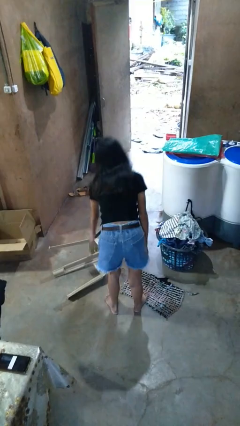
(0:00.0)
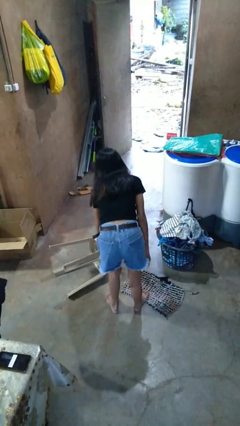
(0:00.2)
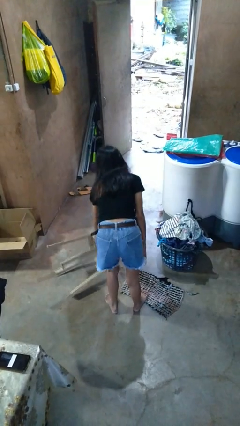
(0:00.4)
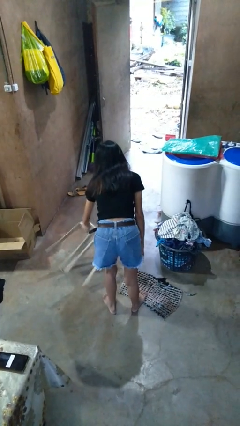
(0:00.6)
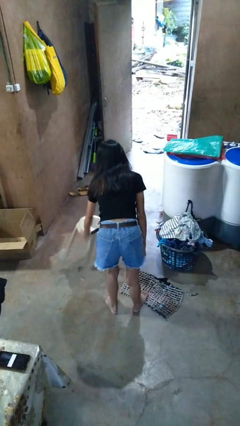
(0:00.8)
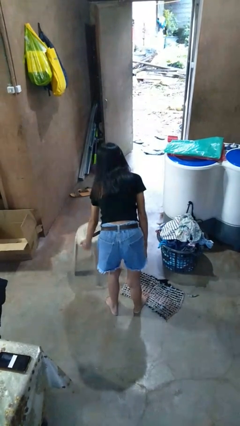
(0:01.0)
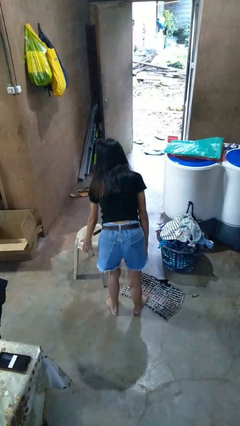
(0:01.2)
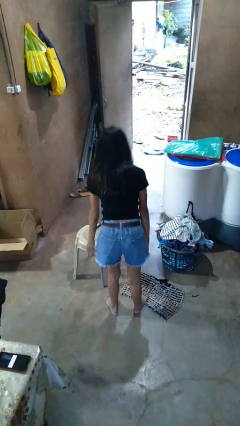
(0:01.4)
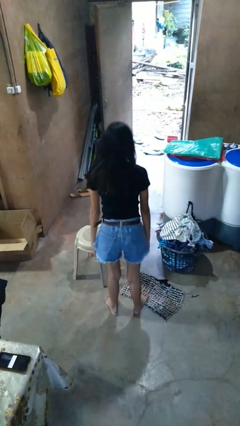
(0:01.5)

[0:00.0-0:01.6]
person sets upright furniture

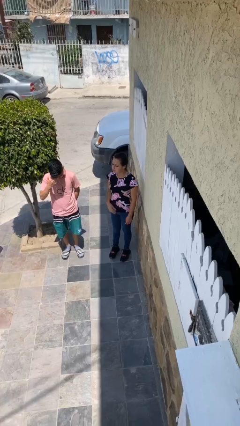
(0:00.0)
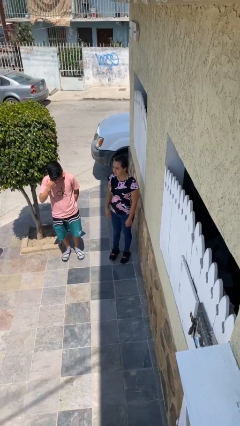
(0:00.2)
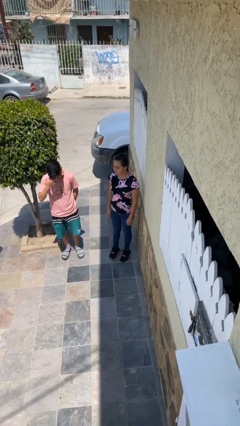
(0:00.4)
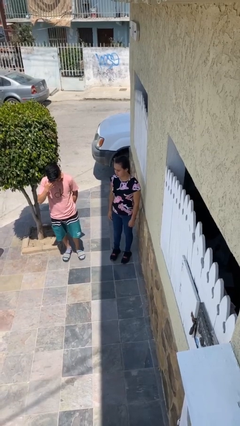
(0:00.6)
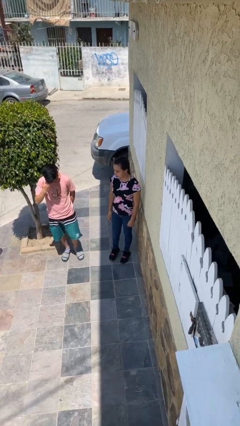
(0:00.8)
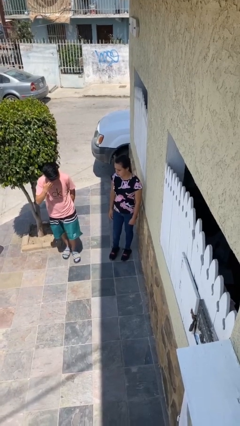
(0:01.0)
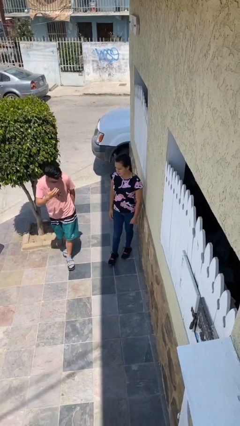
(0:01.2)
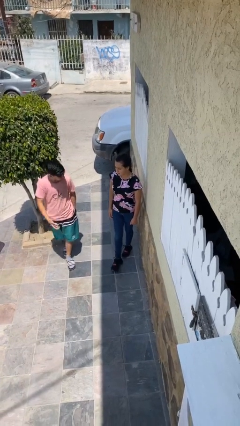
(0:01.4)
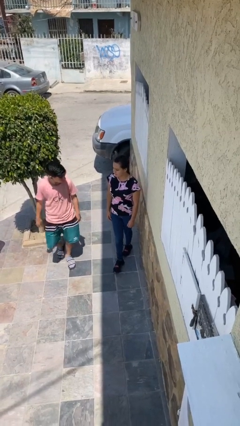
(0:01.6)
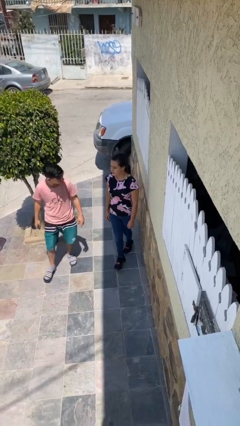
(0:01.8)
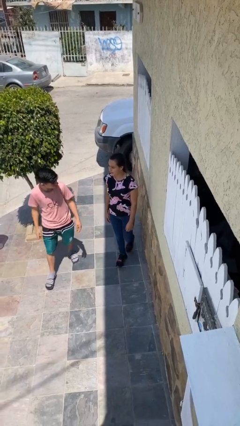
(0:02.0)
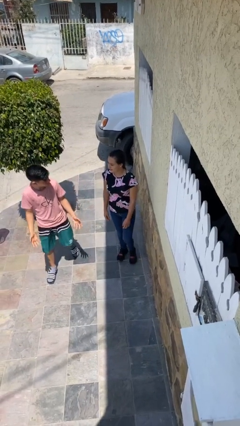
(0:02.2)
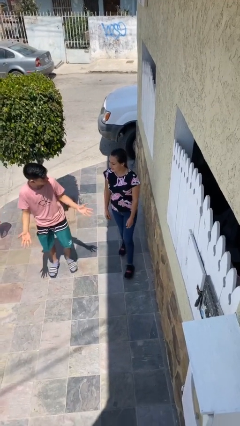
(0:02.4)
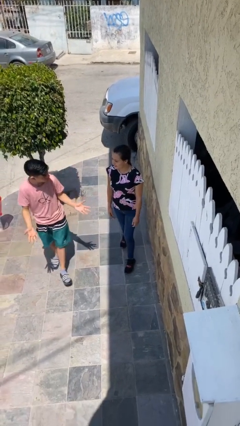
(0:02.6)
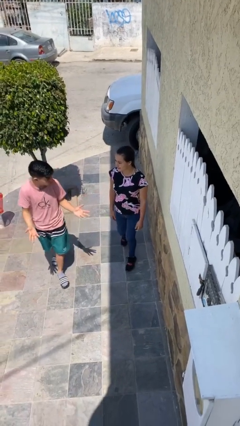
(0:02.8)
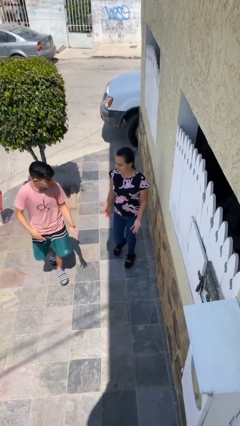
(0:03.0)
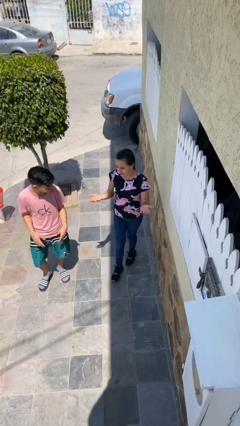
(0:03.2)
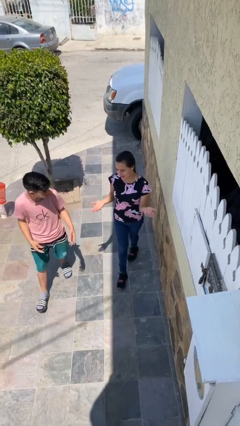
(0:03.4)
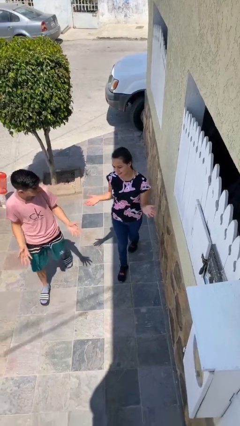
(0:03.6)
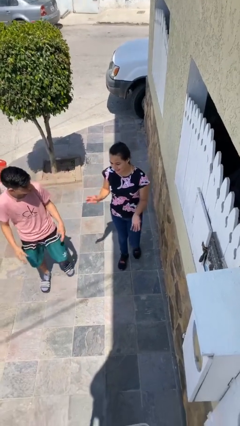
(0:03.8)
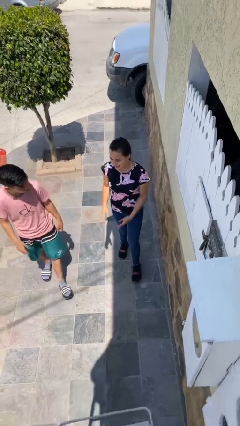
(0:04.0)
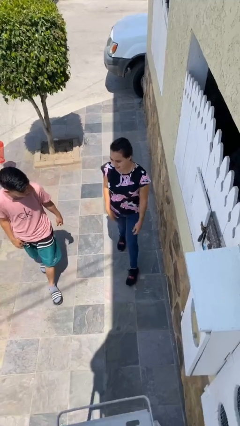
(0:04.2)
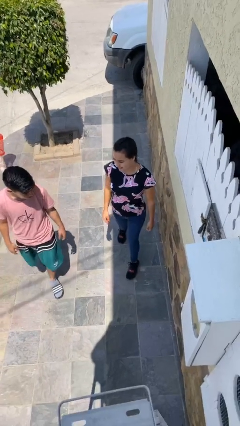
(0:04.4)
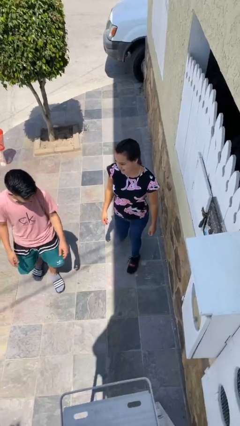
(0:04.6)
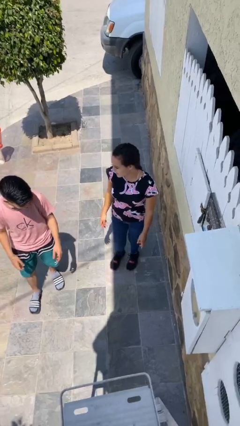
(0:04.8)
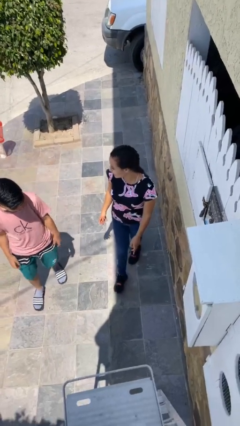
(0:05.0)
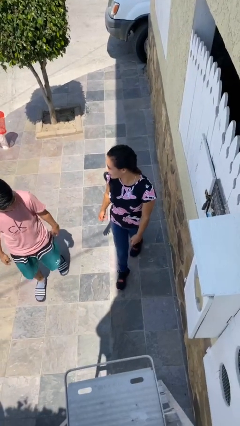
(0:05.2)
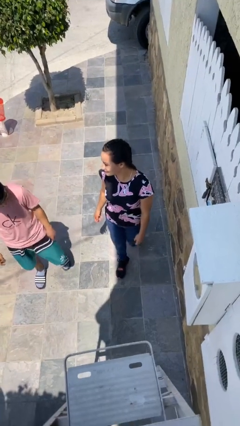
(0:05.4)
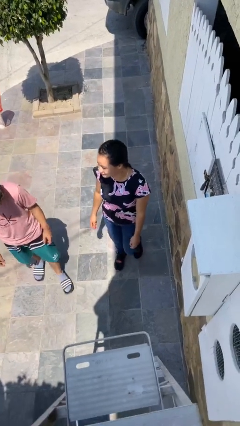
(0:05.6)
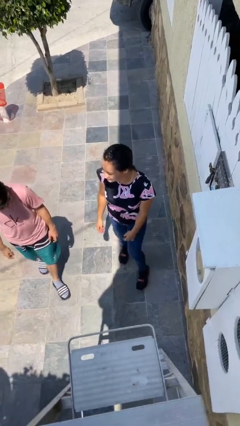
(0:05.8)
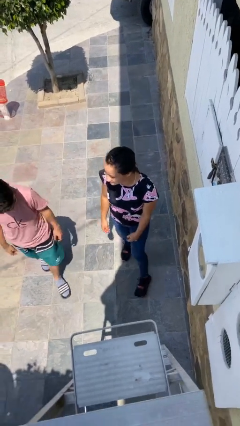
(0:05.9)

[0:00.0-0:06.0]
person talks to person

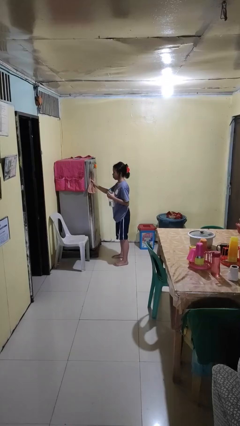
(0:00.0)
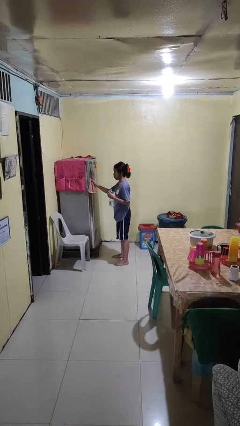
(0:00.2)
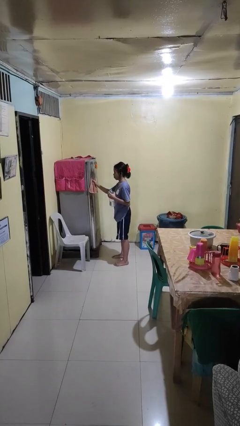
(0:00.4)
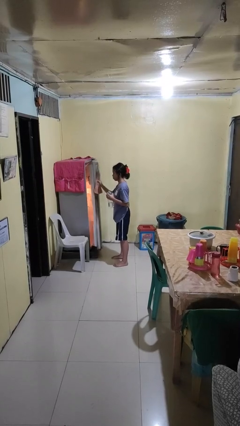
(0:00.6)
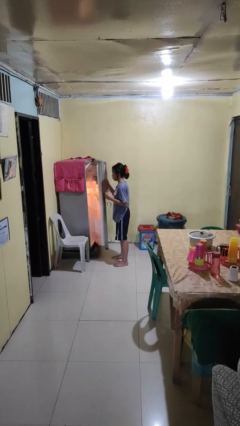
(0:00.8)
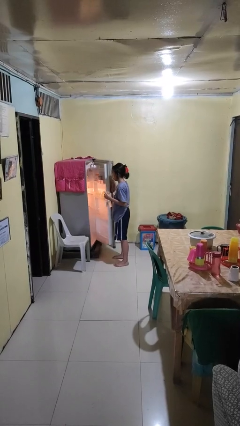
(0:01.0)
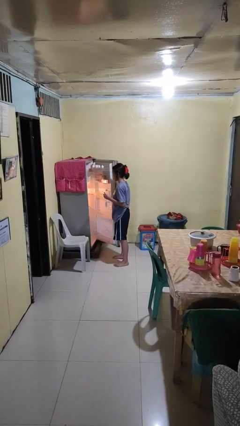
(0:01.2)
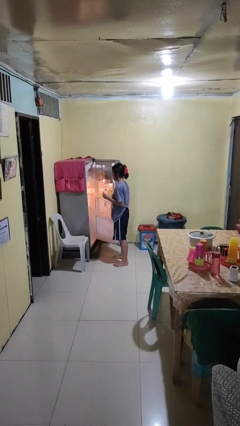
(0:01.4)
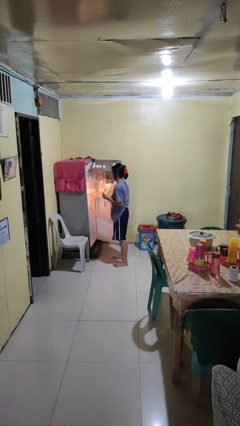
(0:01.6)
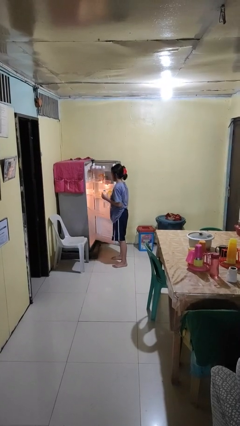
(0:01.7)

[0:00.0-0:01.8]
person opens refrigerator

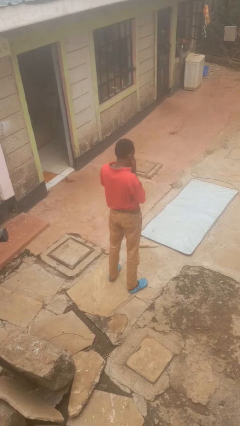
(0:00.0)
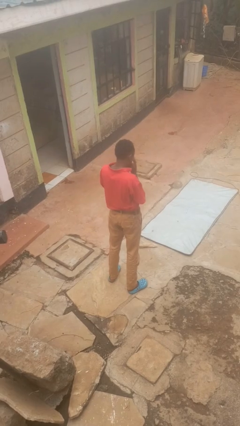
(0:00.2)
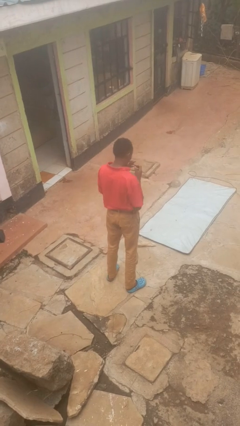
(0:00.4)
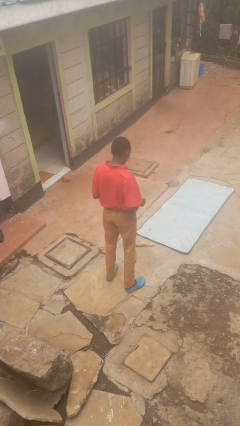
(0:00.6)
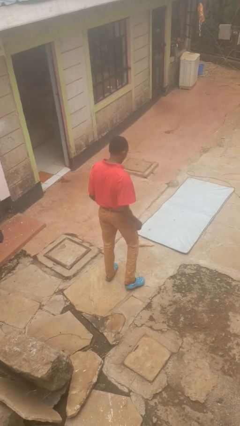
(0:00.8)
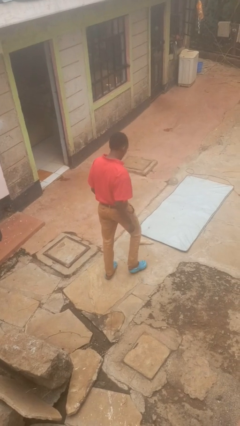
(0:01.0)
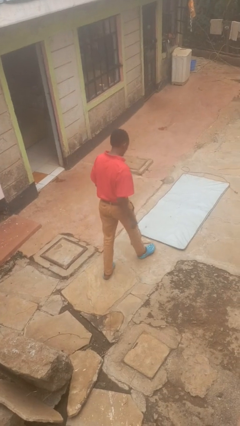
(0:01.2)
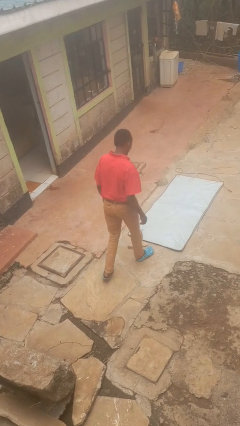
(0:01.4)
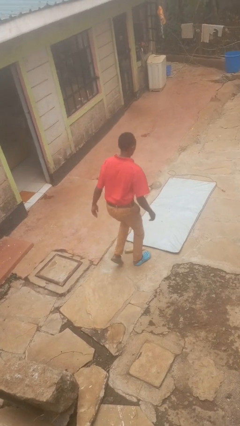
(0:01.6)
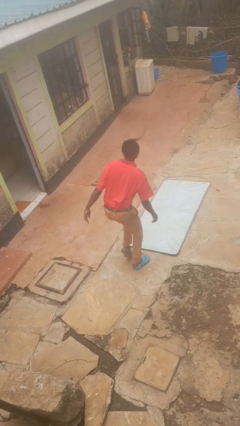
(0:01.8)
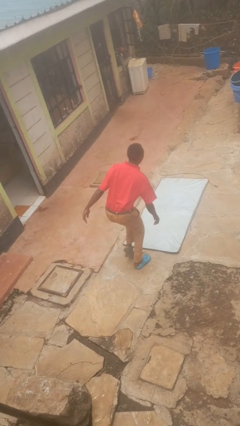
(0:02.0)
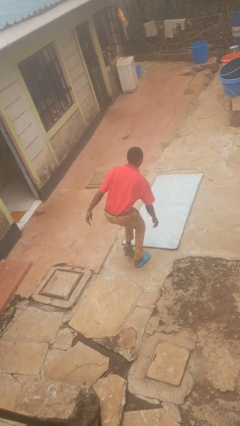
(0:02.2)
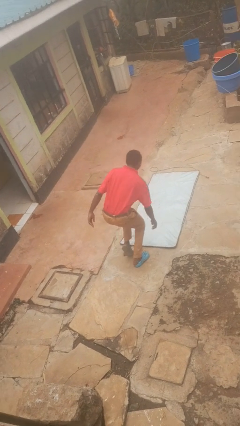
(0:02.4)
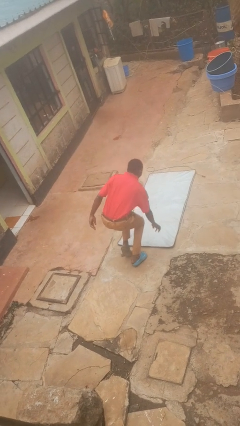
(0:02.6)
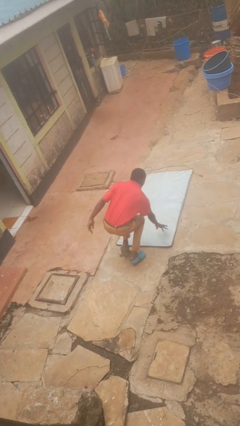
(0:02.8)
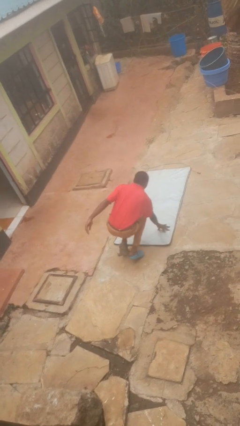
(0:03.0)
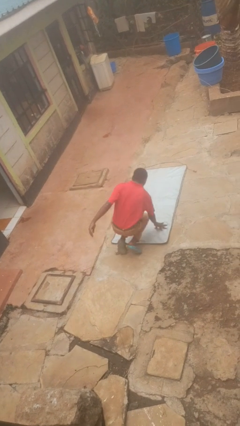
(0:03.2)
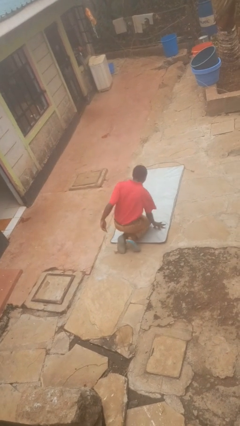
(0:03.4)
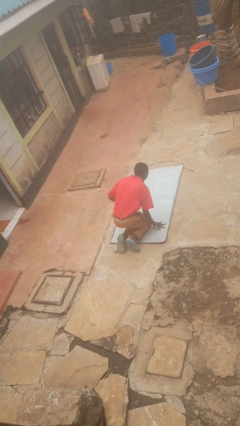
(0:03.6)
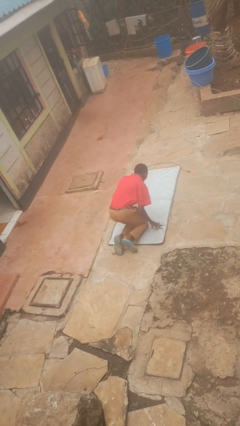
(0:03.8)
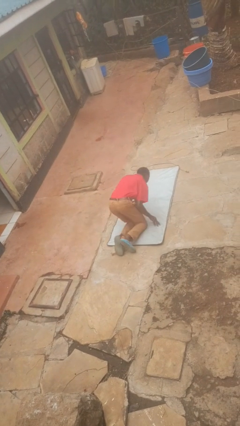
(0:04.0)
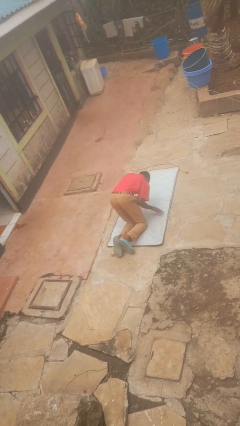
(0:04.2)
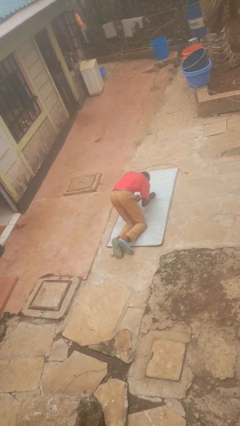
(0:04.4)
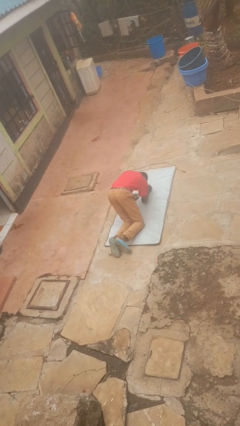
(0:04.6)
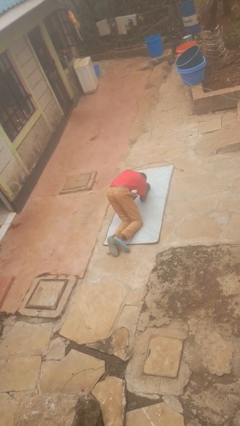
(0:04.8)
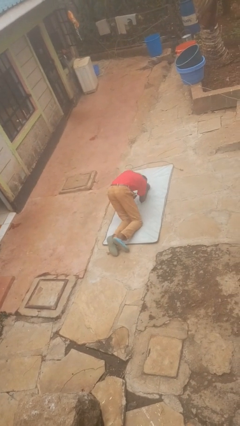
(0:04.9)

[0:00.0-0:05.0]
person trips on object on floor

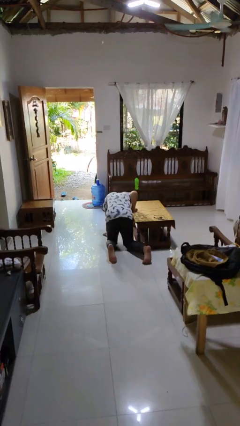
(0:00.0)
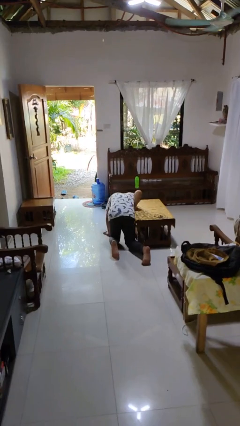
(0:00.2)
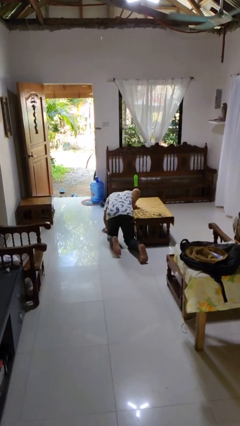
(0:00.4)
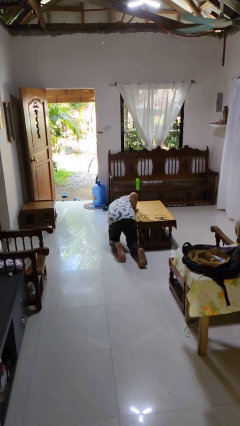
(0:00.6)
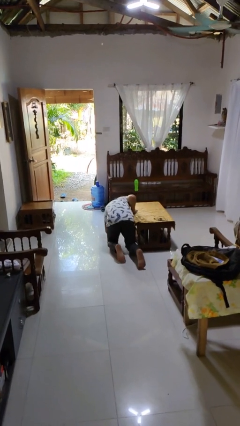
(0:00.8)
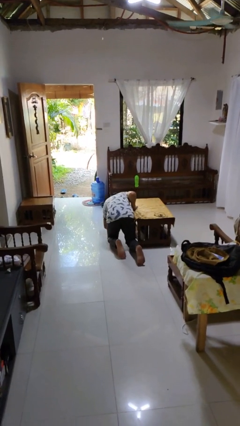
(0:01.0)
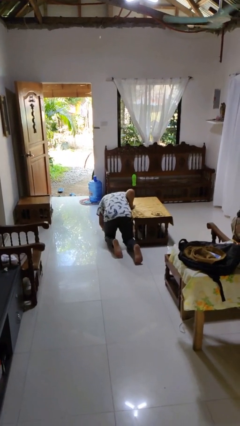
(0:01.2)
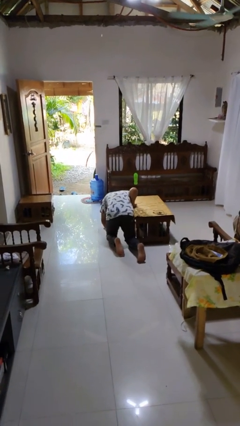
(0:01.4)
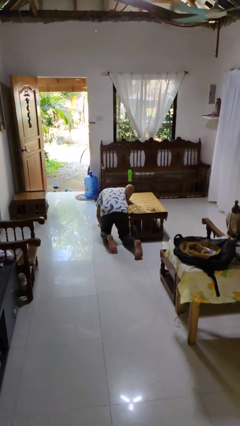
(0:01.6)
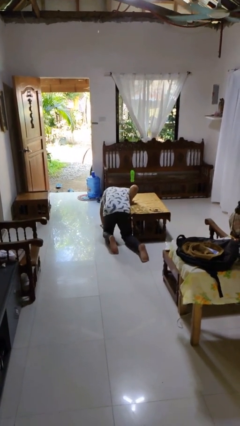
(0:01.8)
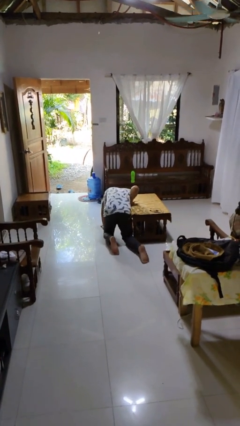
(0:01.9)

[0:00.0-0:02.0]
person lies down on floor

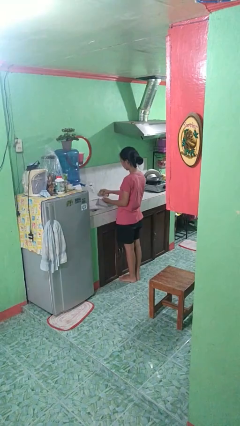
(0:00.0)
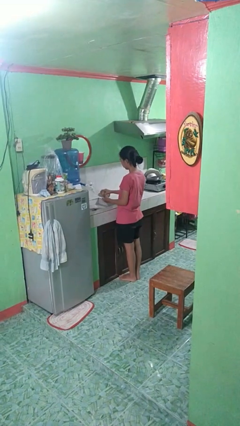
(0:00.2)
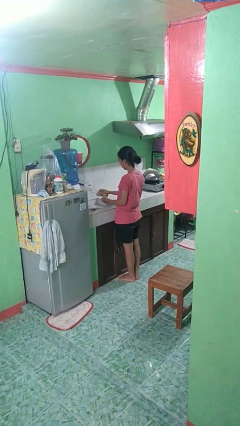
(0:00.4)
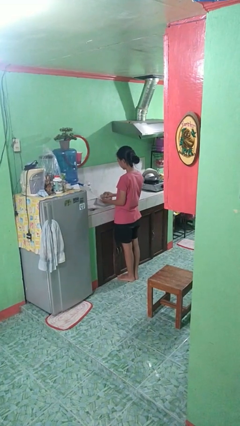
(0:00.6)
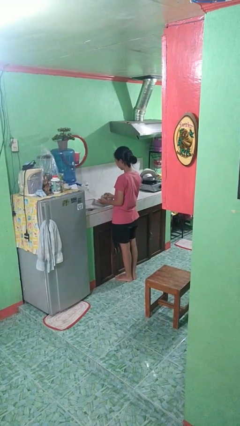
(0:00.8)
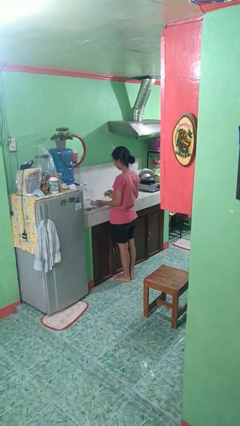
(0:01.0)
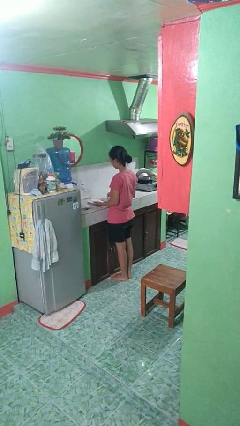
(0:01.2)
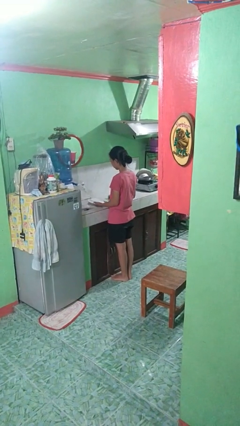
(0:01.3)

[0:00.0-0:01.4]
person dries dish
